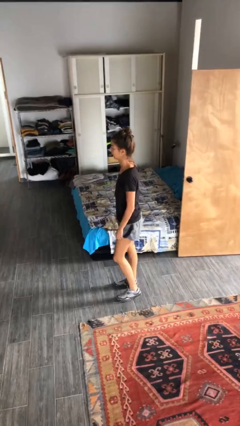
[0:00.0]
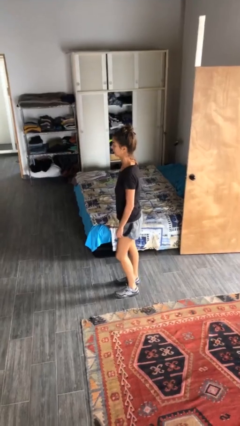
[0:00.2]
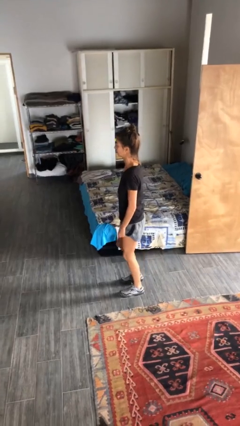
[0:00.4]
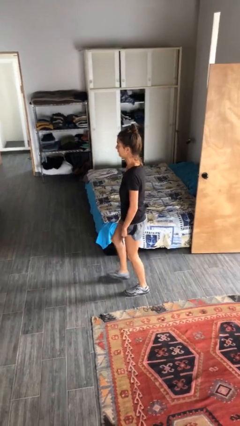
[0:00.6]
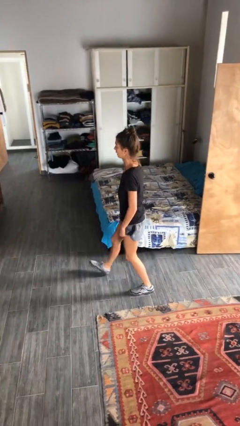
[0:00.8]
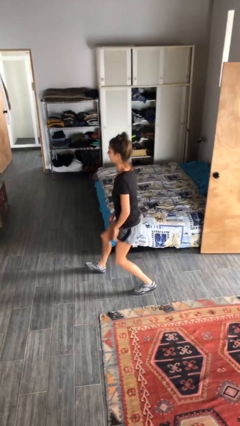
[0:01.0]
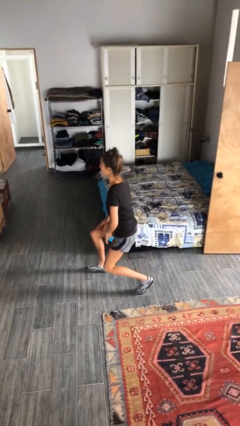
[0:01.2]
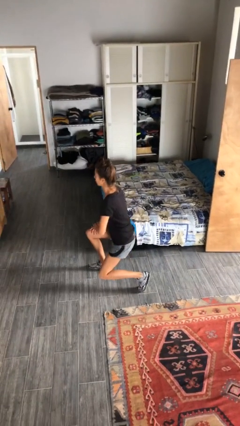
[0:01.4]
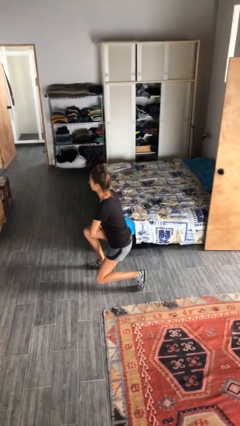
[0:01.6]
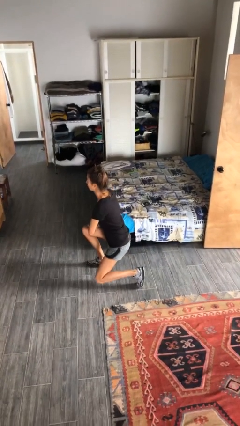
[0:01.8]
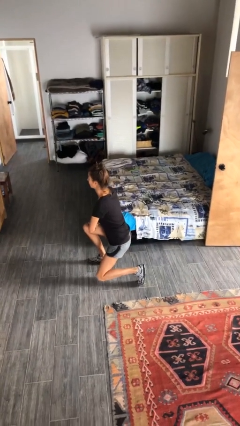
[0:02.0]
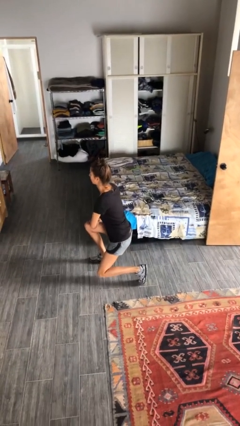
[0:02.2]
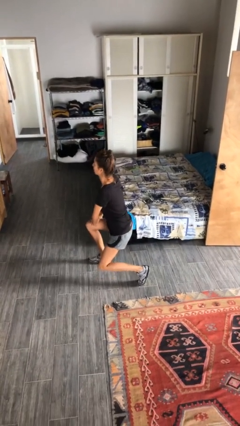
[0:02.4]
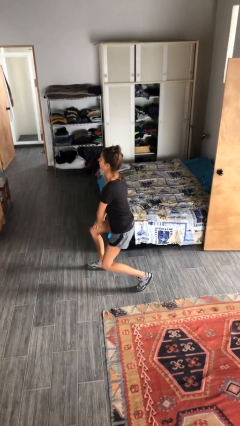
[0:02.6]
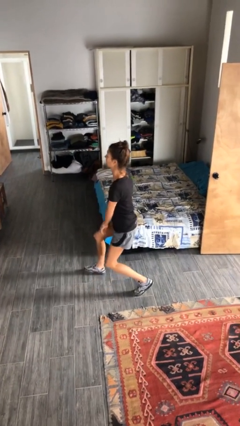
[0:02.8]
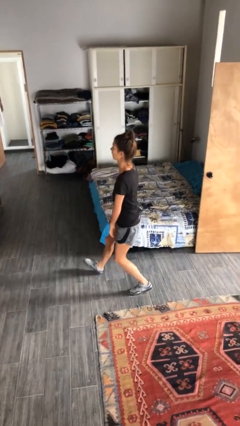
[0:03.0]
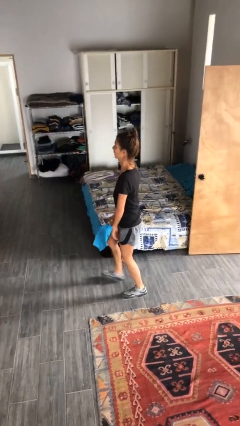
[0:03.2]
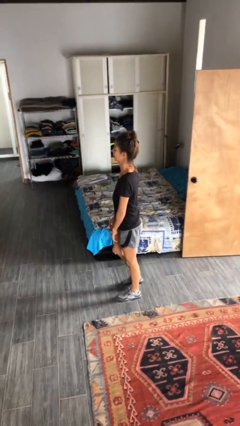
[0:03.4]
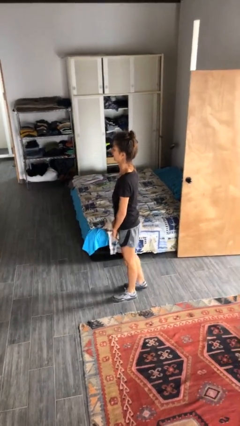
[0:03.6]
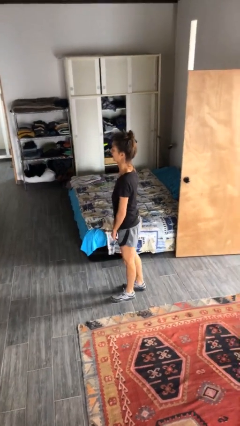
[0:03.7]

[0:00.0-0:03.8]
person exercises with lunges

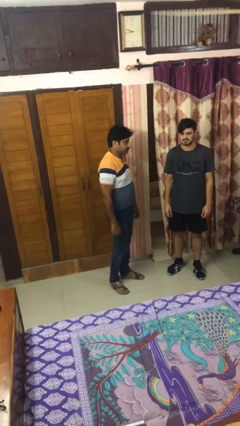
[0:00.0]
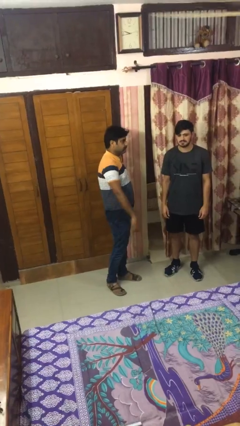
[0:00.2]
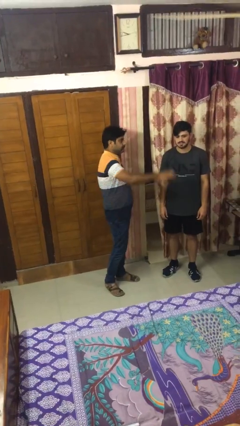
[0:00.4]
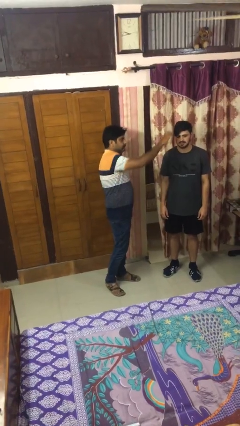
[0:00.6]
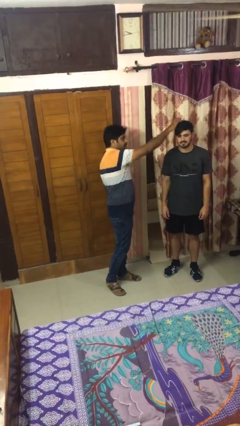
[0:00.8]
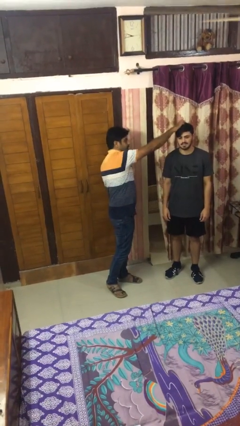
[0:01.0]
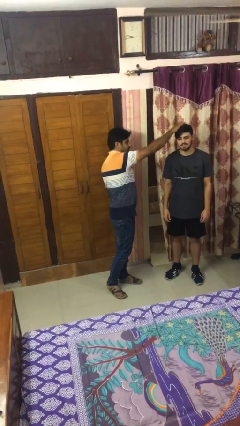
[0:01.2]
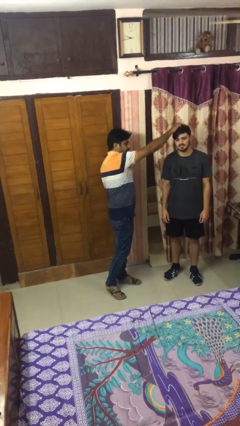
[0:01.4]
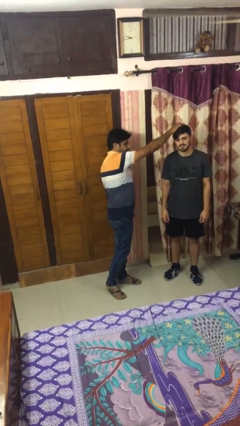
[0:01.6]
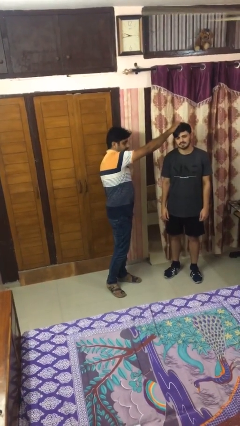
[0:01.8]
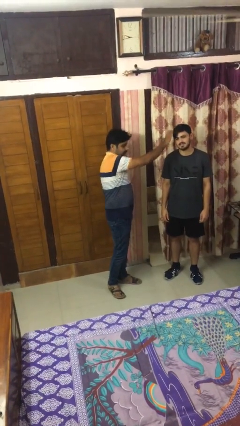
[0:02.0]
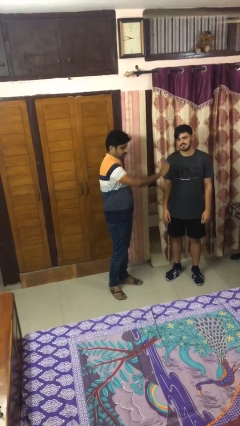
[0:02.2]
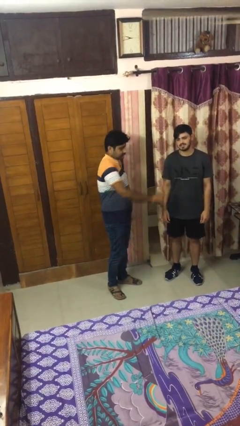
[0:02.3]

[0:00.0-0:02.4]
person grabs person by hair

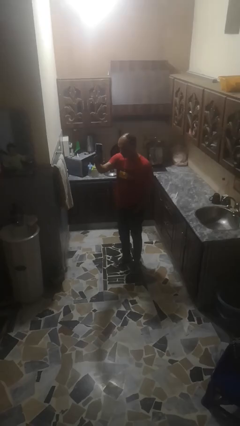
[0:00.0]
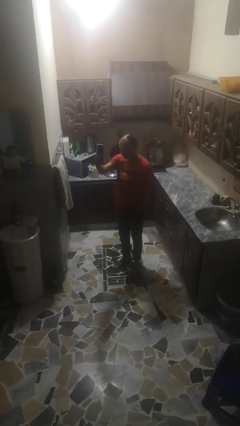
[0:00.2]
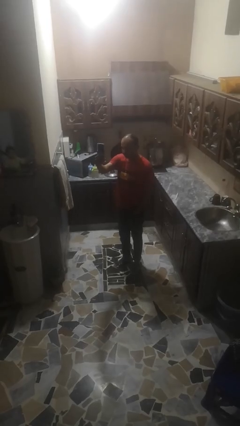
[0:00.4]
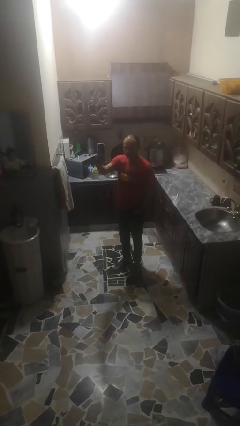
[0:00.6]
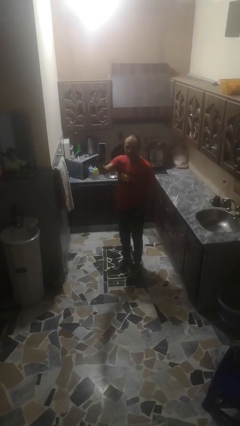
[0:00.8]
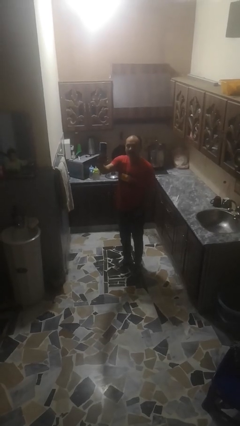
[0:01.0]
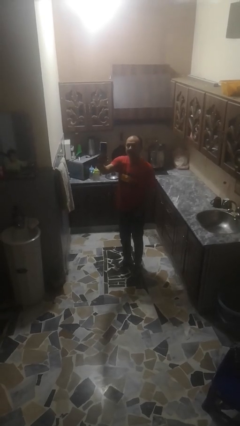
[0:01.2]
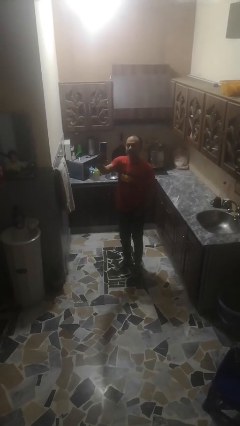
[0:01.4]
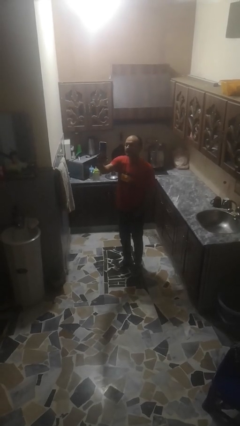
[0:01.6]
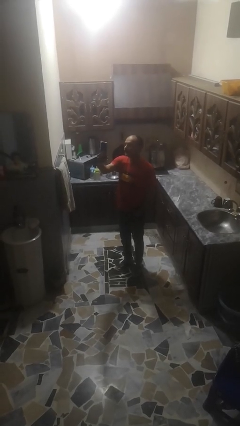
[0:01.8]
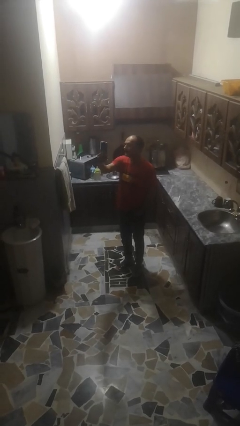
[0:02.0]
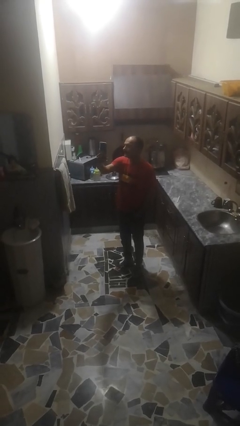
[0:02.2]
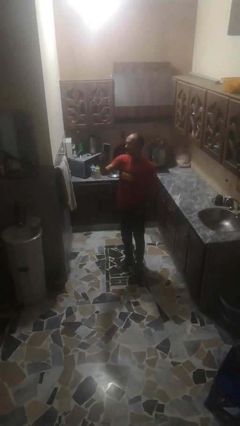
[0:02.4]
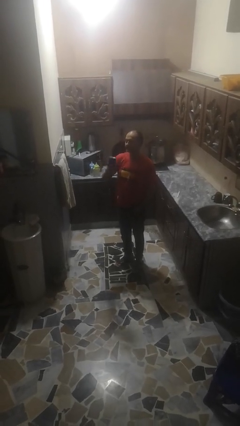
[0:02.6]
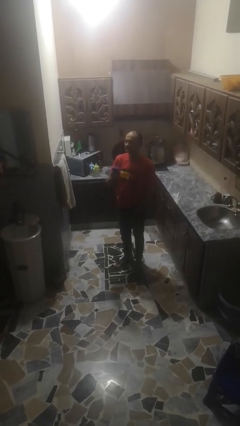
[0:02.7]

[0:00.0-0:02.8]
person takes selfie

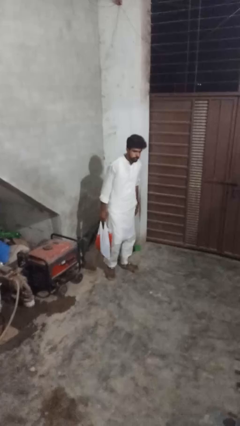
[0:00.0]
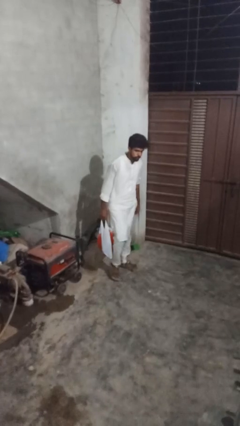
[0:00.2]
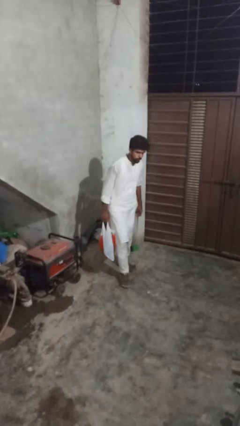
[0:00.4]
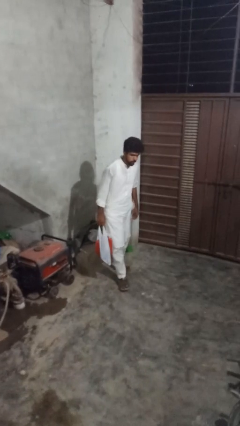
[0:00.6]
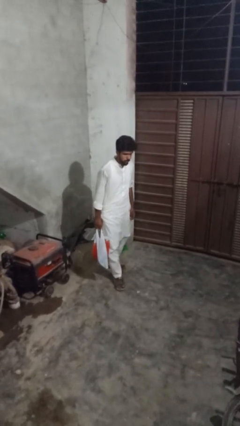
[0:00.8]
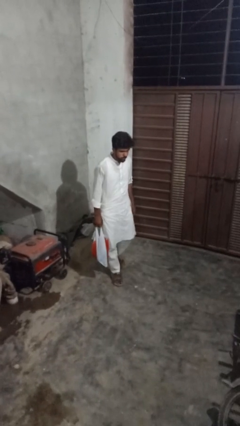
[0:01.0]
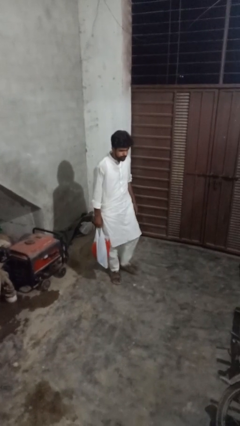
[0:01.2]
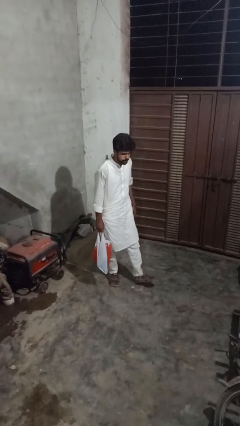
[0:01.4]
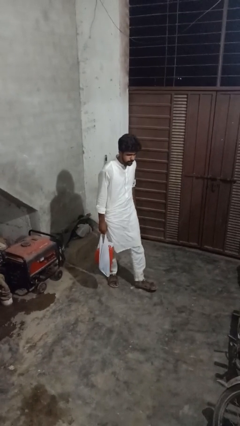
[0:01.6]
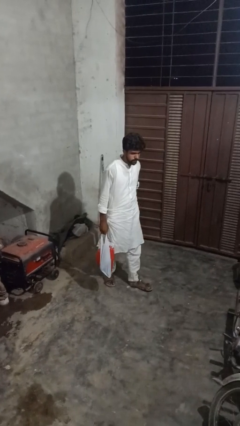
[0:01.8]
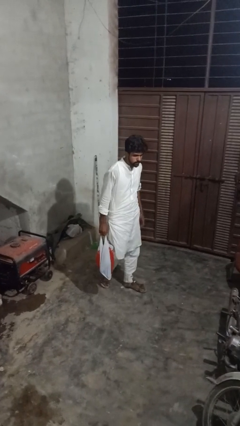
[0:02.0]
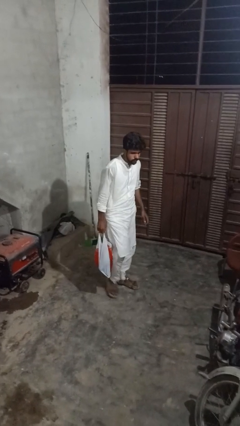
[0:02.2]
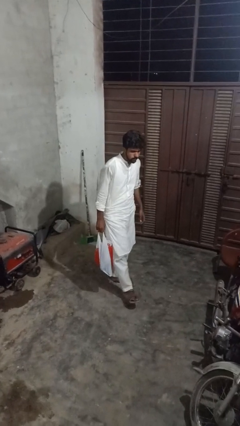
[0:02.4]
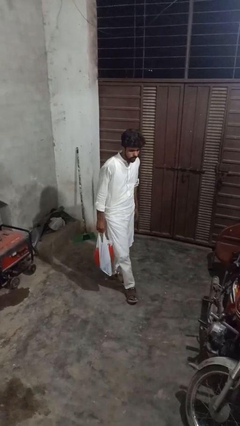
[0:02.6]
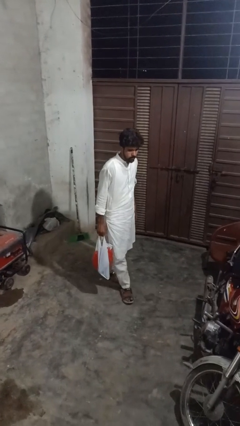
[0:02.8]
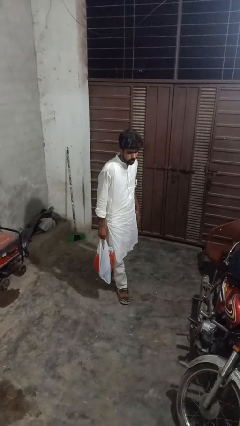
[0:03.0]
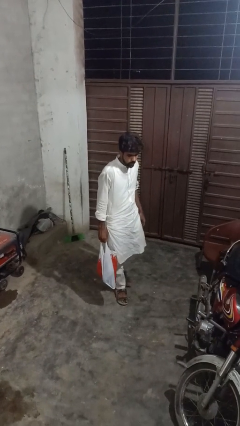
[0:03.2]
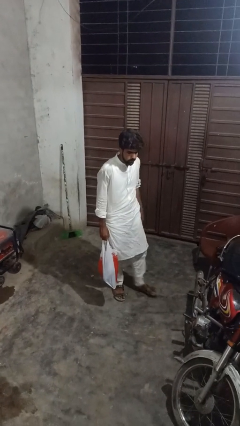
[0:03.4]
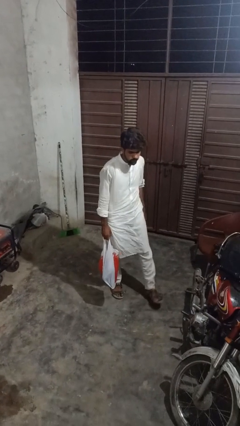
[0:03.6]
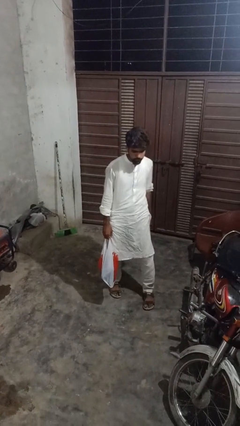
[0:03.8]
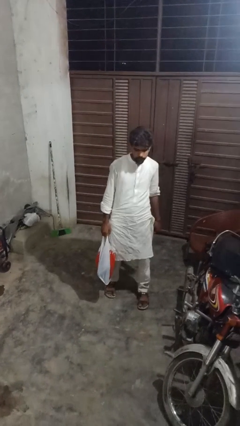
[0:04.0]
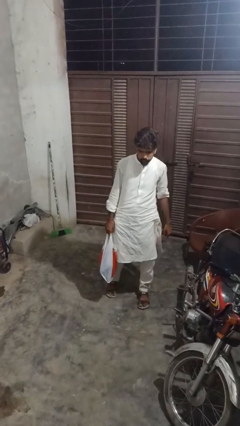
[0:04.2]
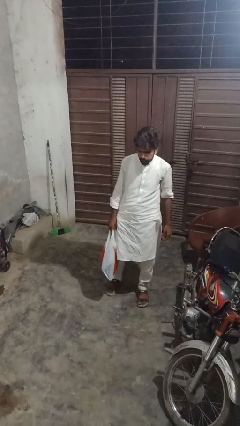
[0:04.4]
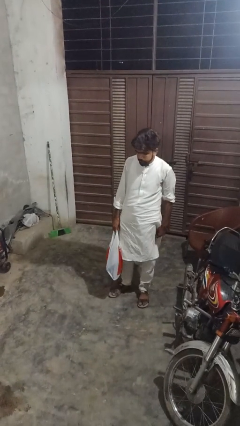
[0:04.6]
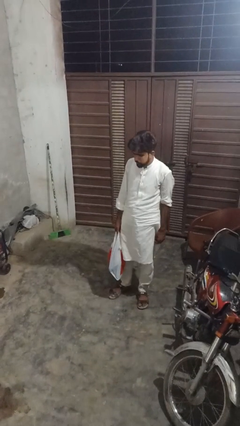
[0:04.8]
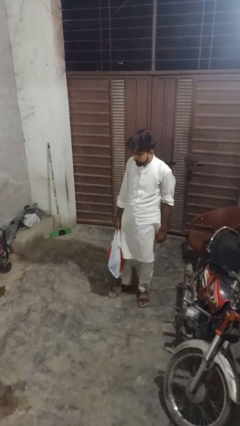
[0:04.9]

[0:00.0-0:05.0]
person carries groceries

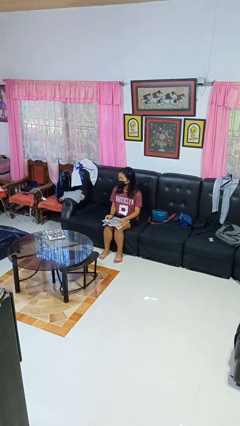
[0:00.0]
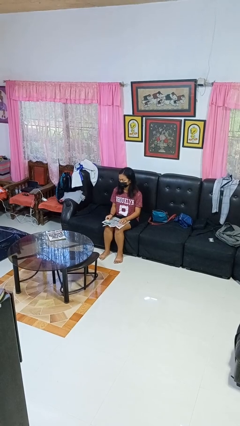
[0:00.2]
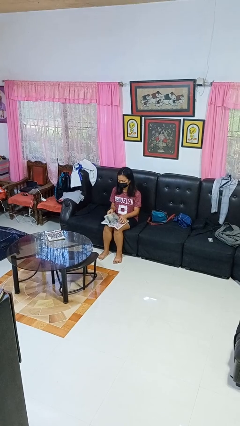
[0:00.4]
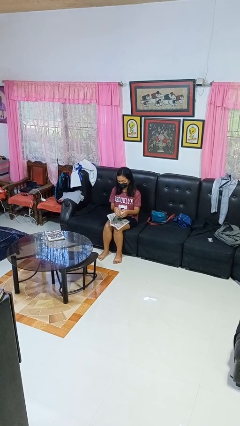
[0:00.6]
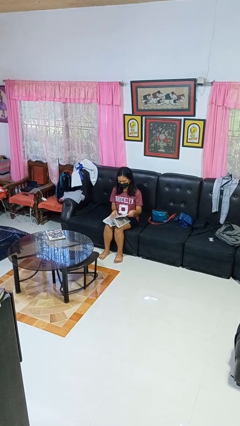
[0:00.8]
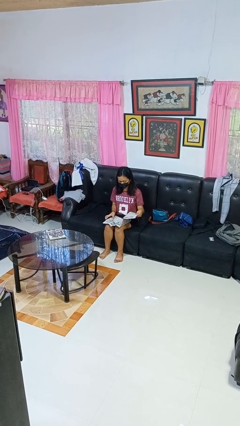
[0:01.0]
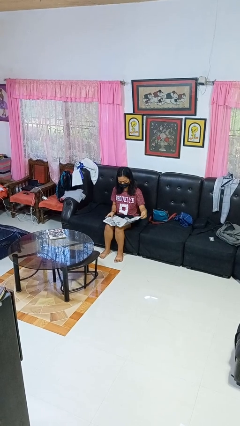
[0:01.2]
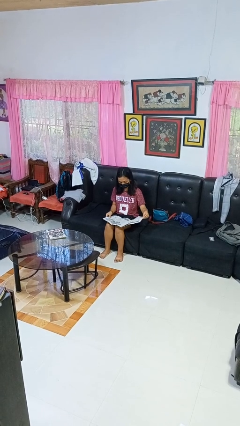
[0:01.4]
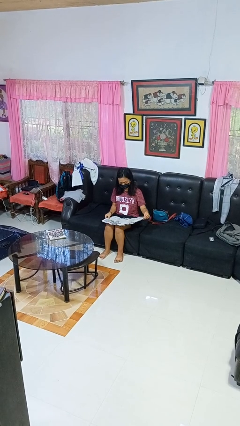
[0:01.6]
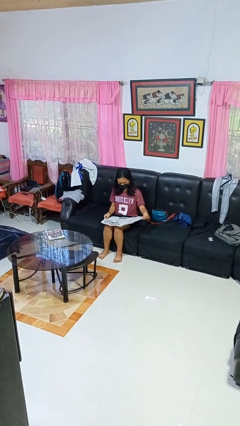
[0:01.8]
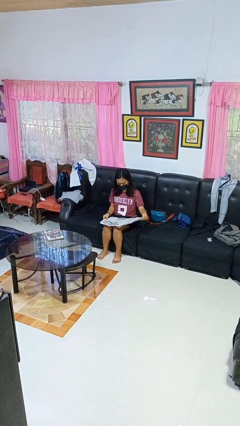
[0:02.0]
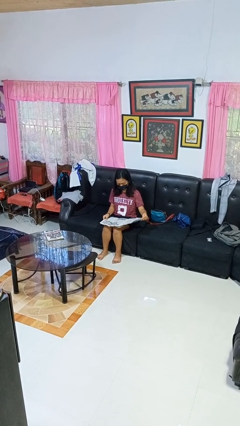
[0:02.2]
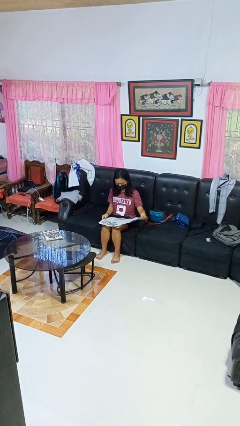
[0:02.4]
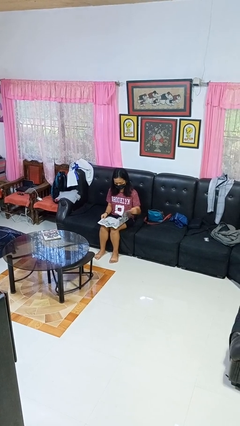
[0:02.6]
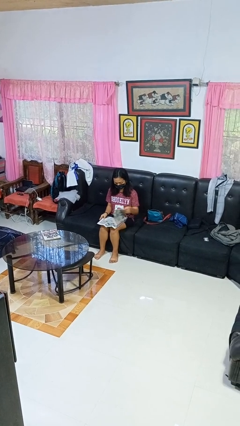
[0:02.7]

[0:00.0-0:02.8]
person reads newspaper

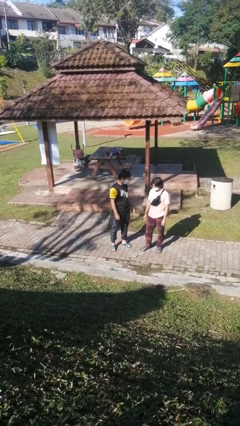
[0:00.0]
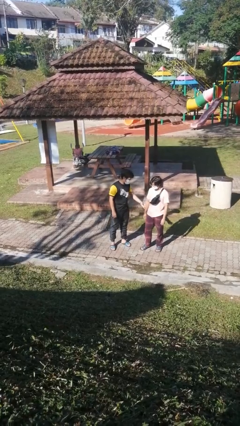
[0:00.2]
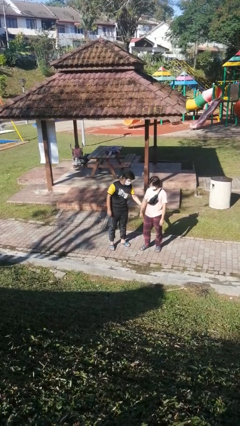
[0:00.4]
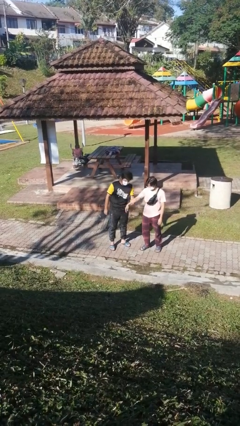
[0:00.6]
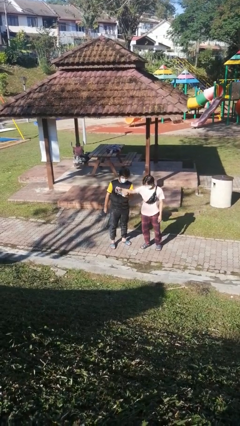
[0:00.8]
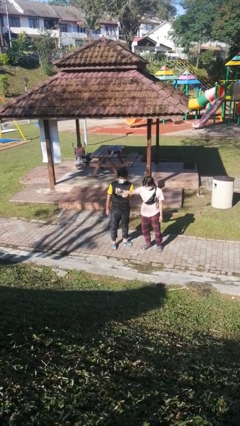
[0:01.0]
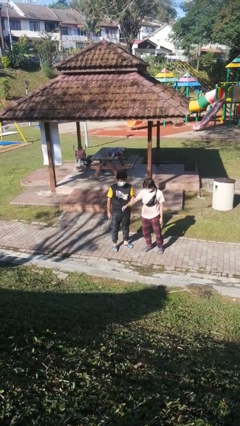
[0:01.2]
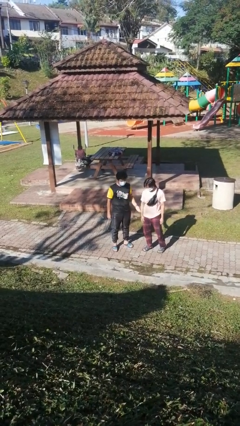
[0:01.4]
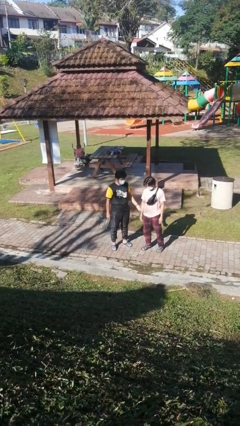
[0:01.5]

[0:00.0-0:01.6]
person grabs person by forearm
